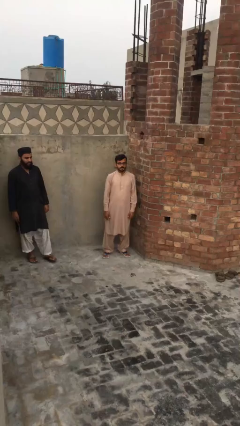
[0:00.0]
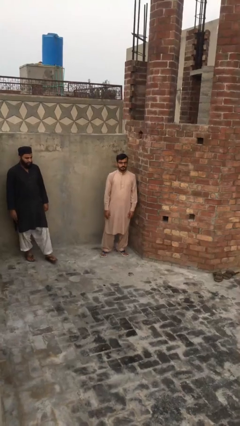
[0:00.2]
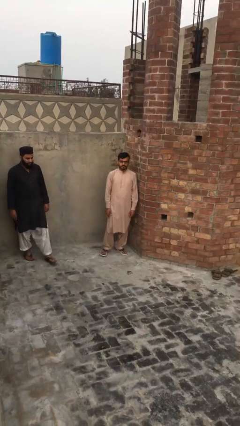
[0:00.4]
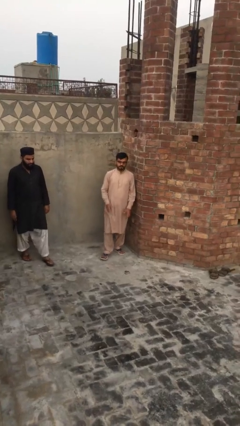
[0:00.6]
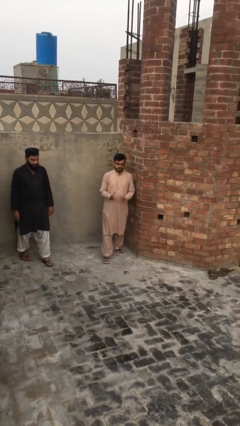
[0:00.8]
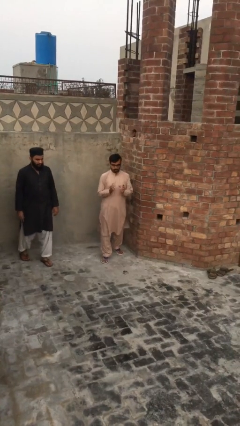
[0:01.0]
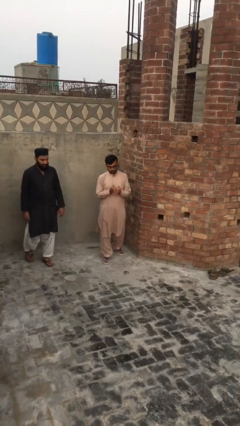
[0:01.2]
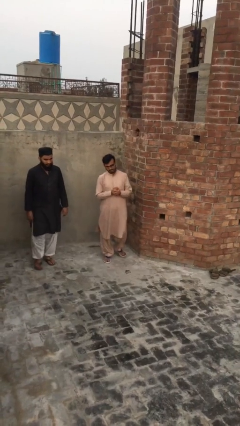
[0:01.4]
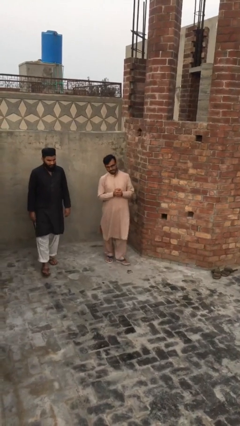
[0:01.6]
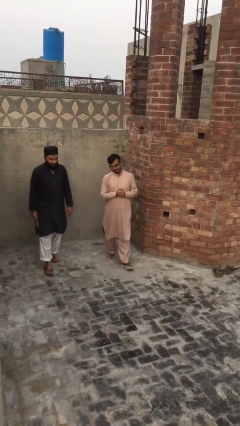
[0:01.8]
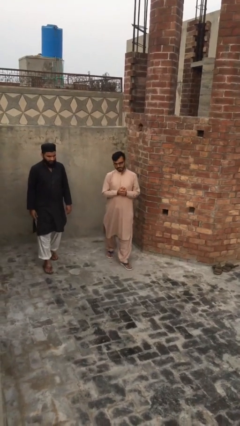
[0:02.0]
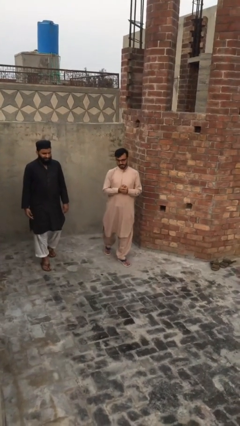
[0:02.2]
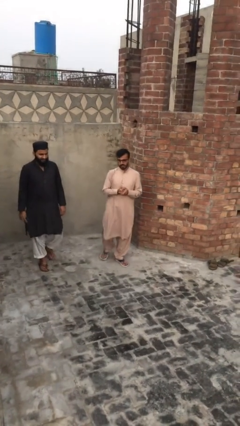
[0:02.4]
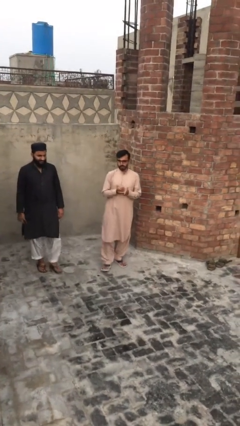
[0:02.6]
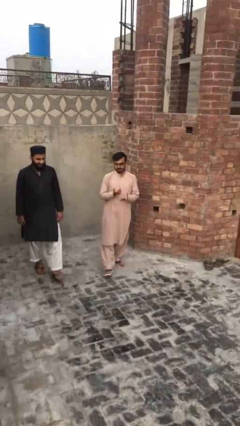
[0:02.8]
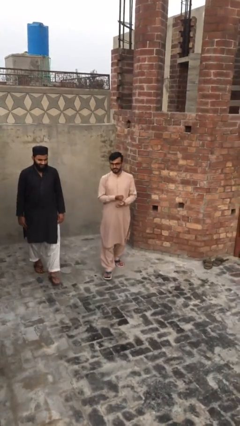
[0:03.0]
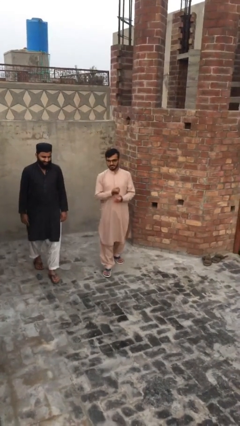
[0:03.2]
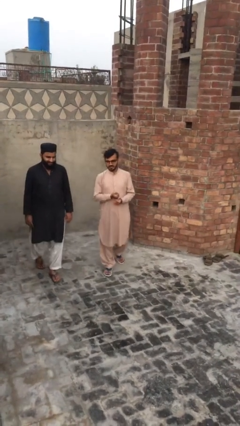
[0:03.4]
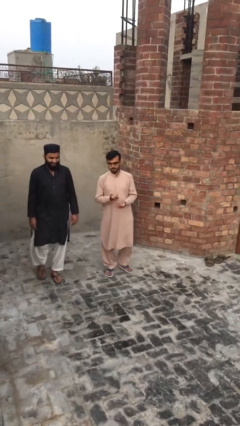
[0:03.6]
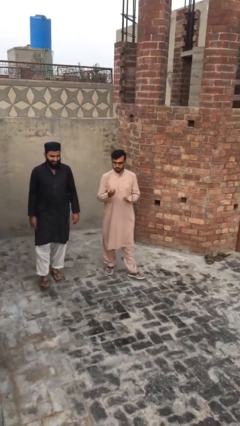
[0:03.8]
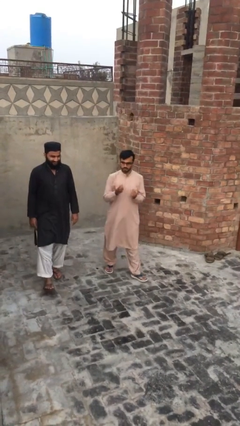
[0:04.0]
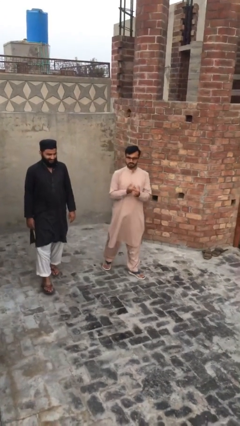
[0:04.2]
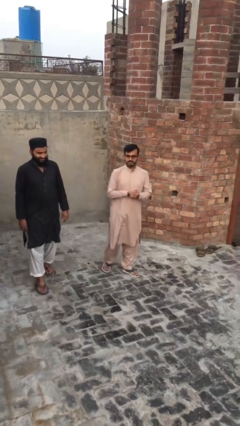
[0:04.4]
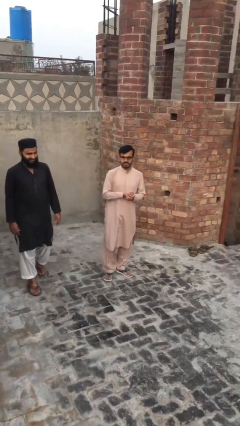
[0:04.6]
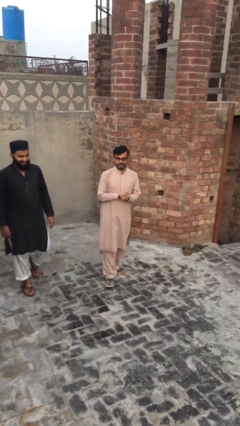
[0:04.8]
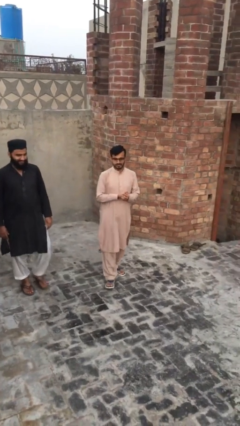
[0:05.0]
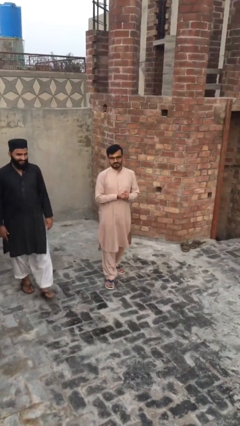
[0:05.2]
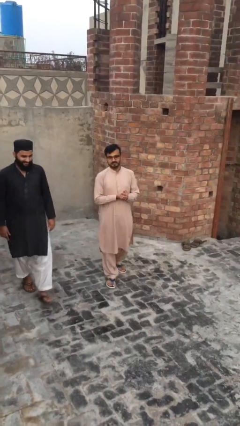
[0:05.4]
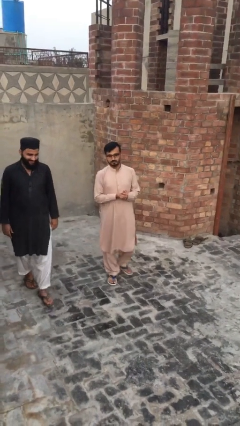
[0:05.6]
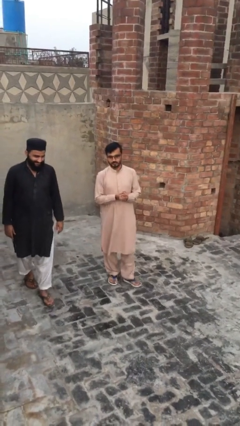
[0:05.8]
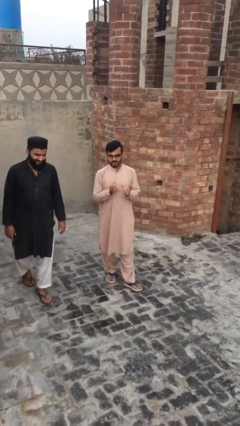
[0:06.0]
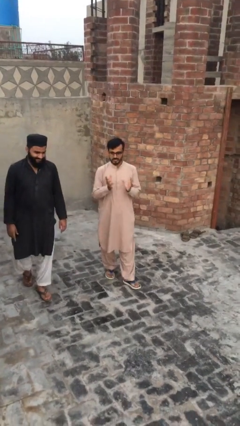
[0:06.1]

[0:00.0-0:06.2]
person talks to person

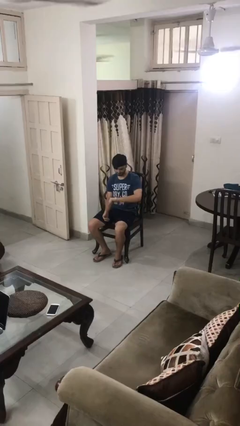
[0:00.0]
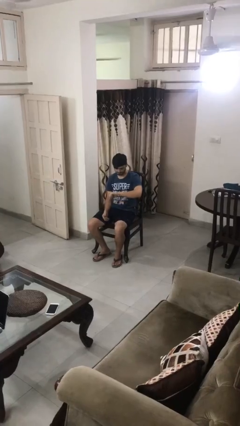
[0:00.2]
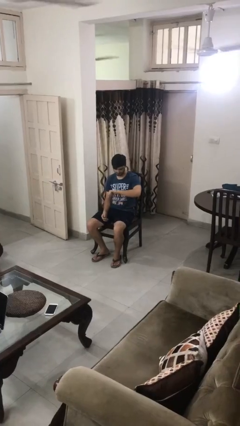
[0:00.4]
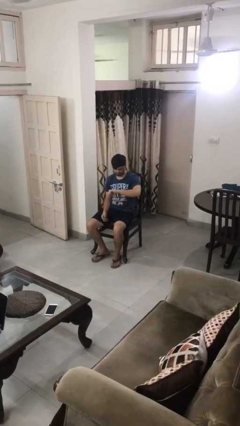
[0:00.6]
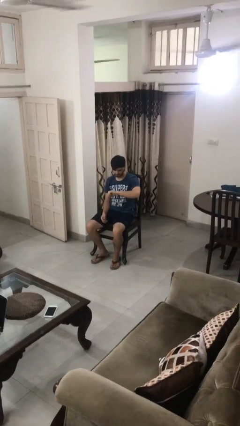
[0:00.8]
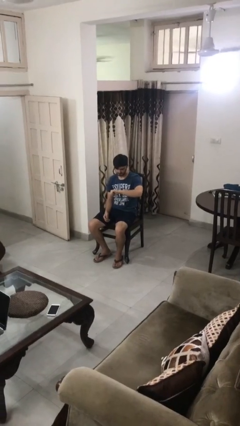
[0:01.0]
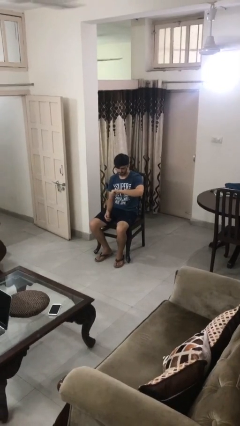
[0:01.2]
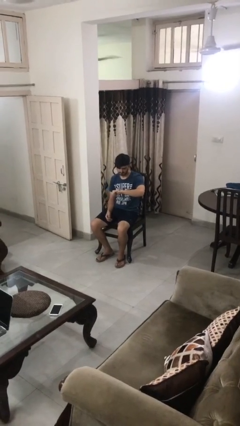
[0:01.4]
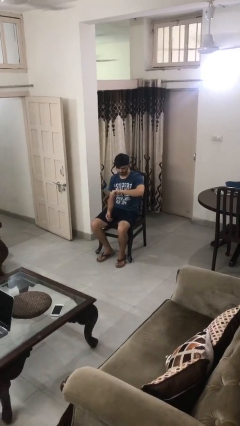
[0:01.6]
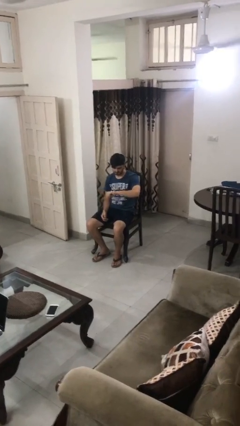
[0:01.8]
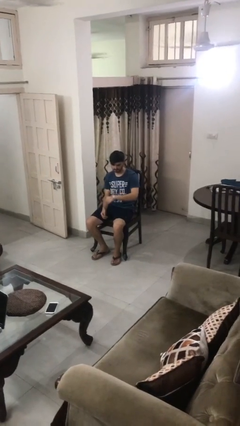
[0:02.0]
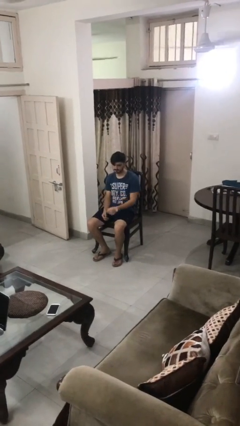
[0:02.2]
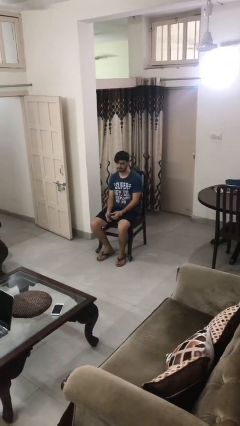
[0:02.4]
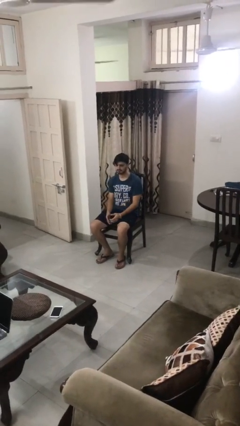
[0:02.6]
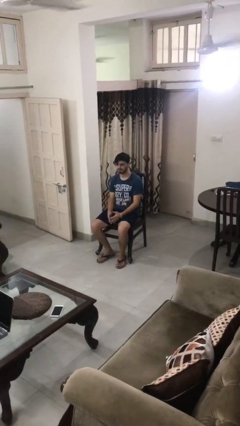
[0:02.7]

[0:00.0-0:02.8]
person looks at wristwatch

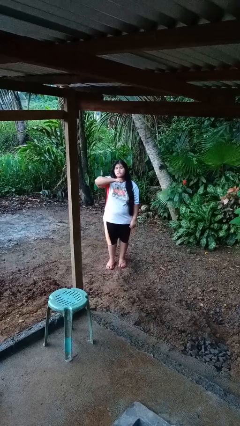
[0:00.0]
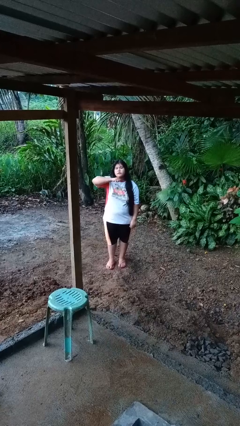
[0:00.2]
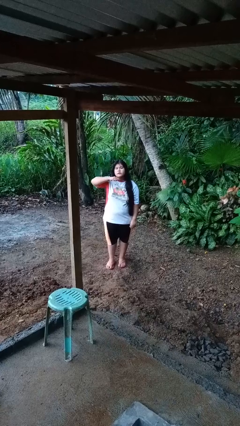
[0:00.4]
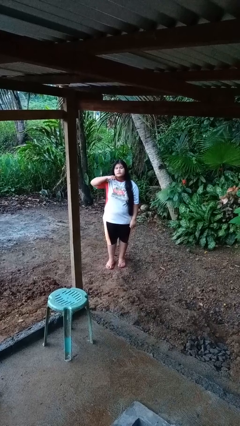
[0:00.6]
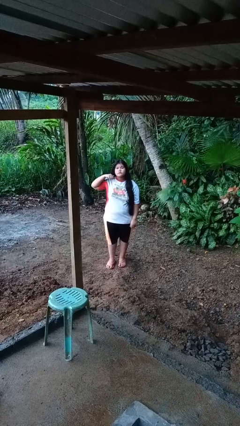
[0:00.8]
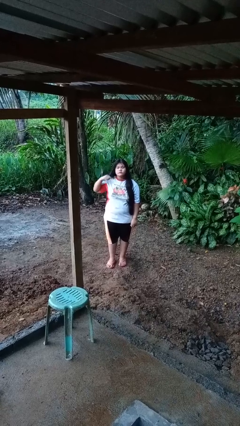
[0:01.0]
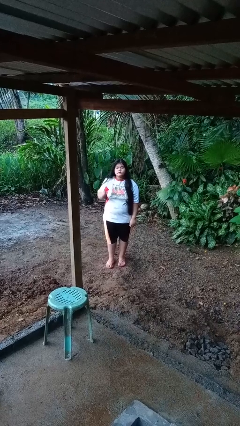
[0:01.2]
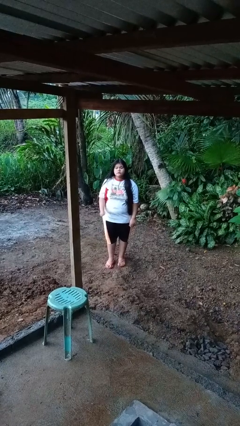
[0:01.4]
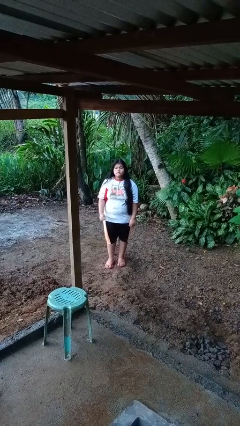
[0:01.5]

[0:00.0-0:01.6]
person gestures cut

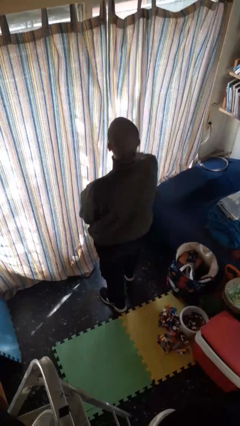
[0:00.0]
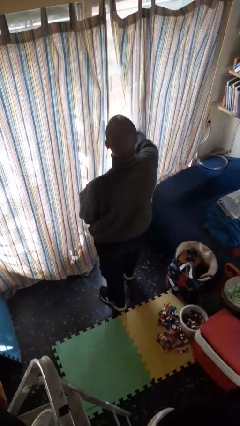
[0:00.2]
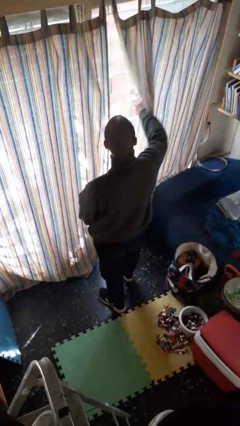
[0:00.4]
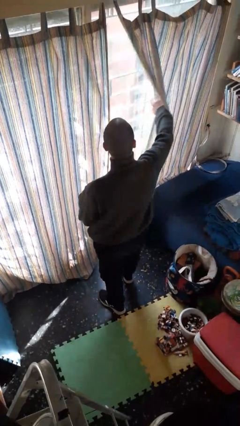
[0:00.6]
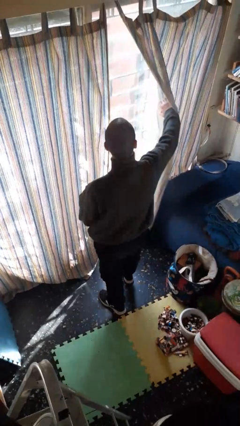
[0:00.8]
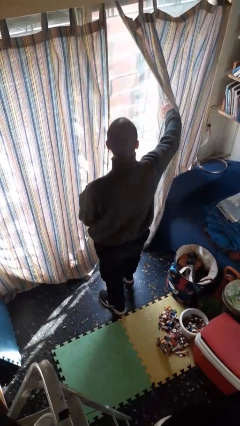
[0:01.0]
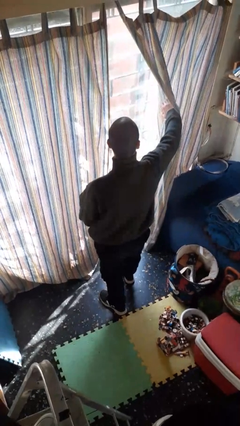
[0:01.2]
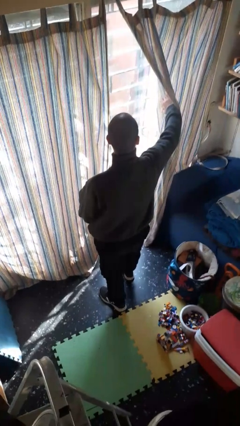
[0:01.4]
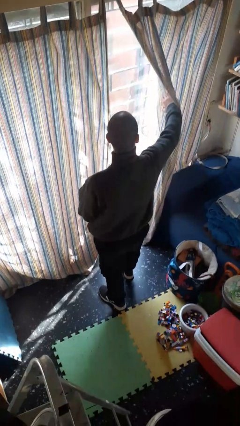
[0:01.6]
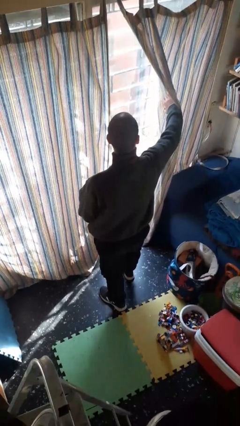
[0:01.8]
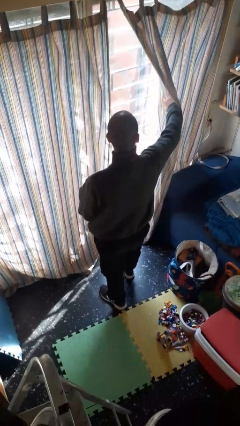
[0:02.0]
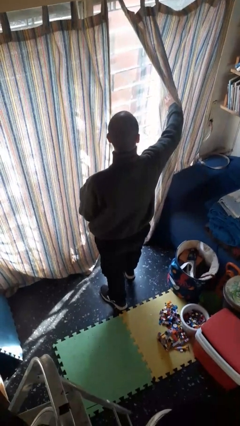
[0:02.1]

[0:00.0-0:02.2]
person opens curtains

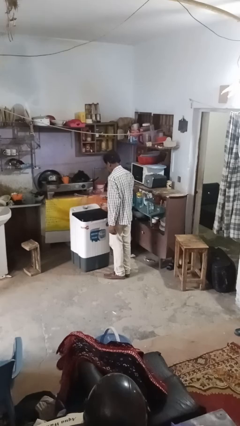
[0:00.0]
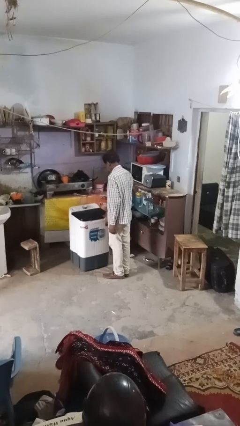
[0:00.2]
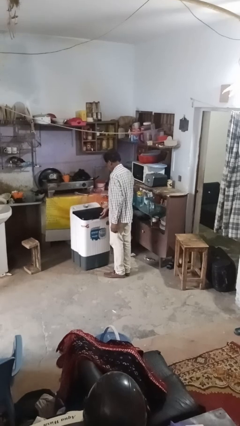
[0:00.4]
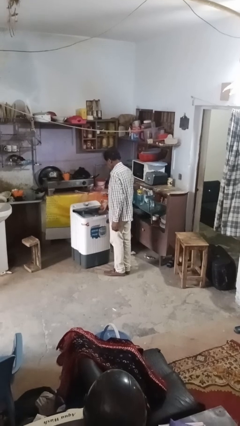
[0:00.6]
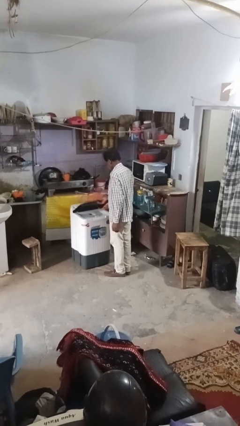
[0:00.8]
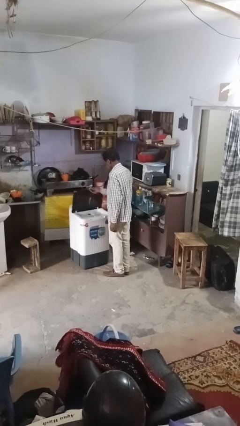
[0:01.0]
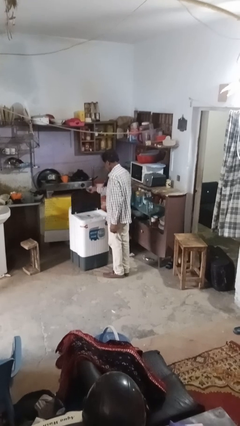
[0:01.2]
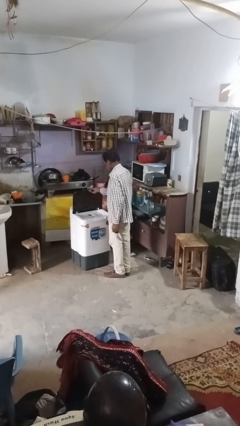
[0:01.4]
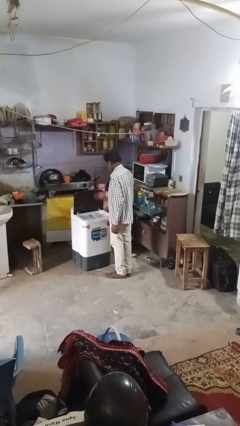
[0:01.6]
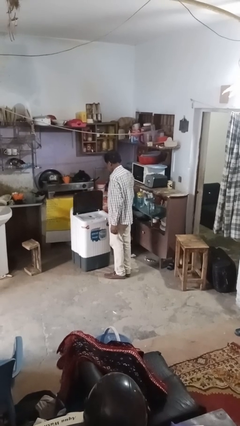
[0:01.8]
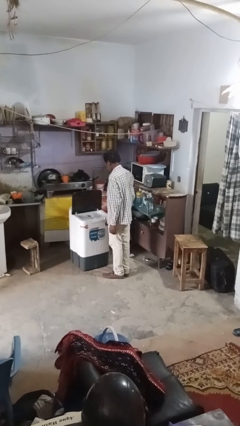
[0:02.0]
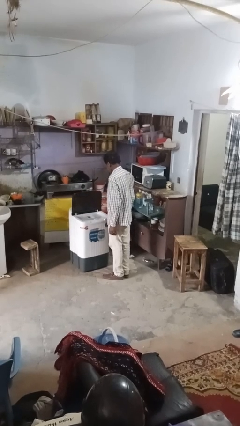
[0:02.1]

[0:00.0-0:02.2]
person opens clothes washer

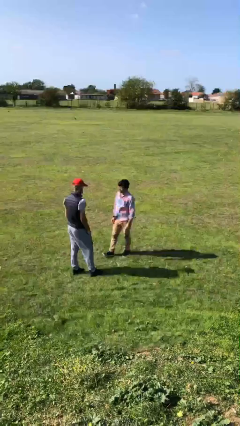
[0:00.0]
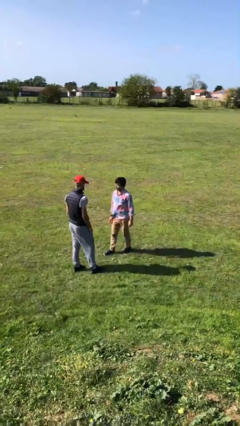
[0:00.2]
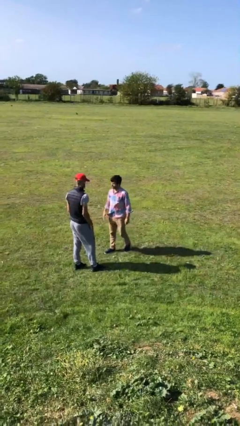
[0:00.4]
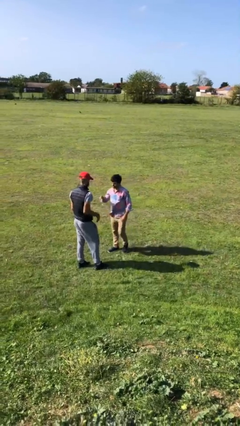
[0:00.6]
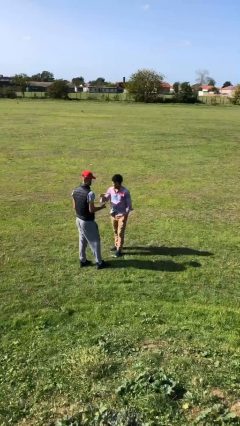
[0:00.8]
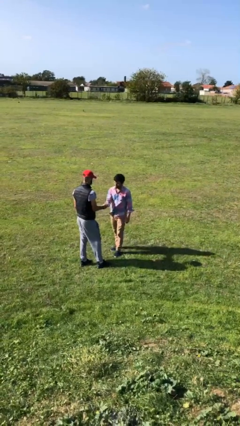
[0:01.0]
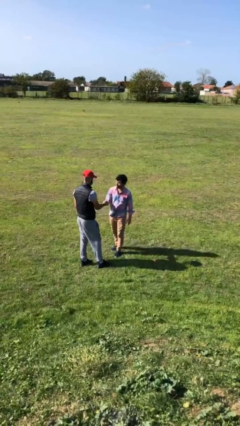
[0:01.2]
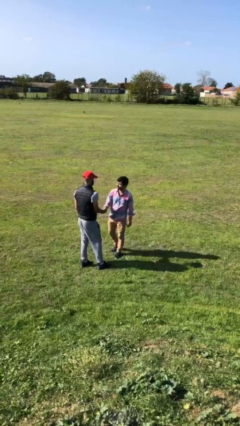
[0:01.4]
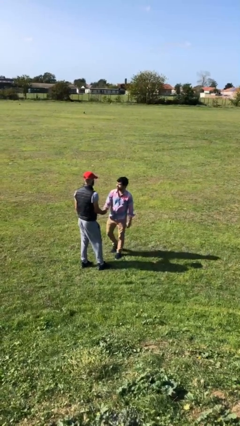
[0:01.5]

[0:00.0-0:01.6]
person shakes hand

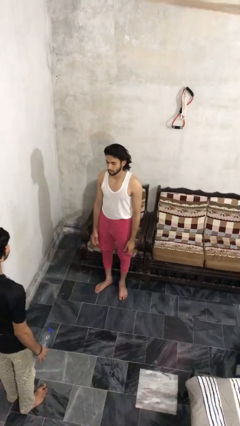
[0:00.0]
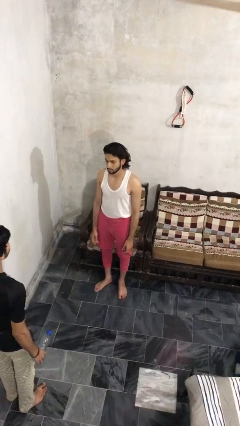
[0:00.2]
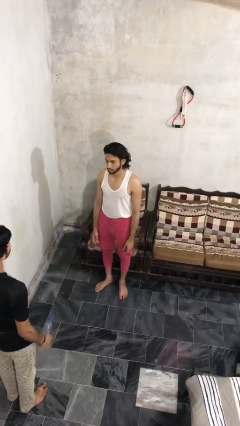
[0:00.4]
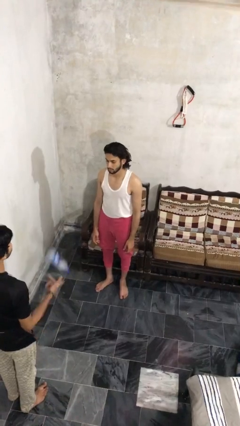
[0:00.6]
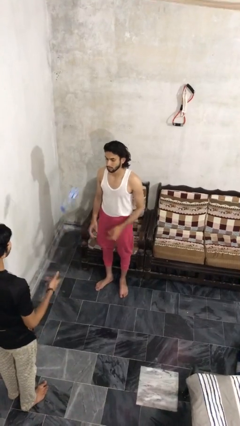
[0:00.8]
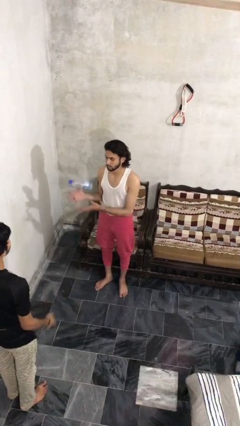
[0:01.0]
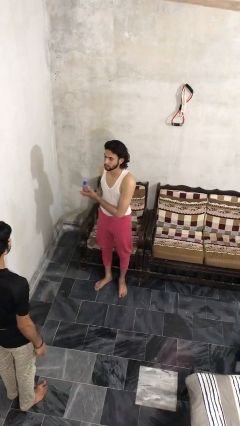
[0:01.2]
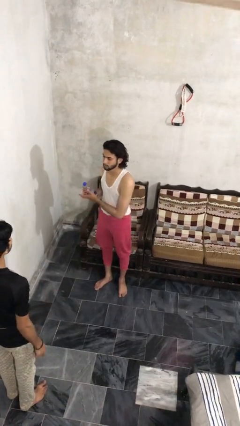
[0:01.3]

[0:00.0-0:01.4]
person catches object from person
